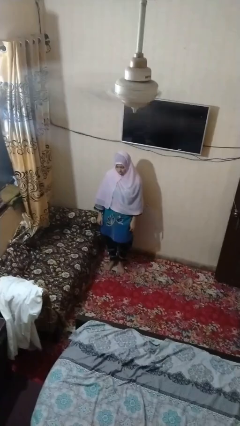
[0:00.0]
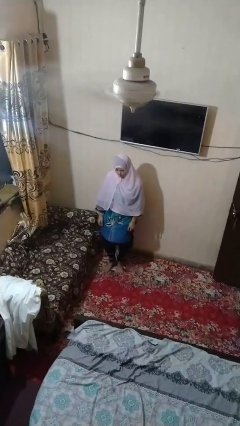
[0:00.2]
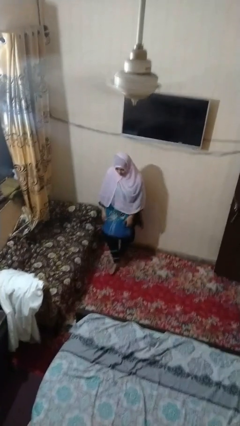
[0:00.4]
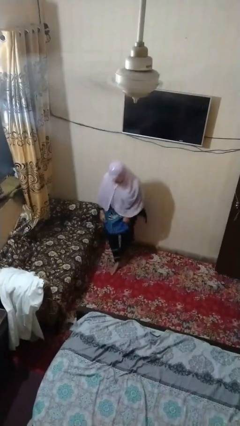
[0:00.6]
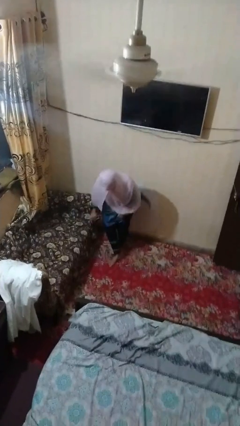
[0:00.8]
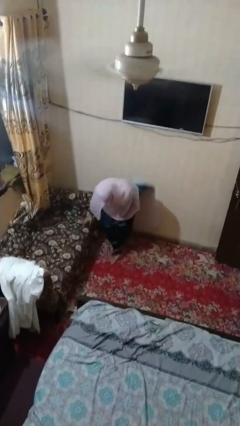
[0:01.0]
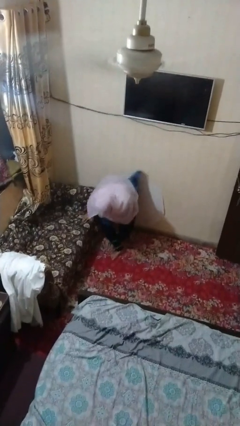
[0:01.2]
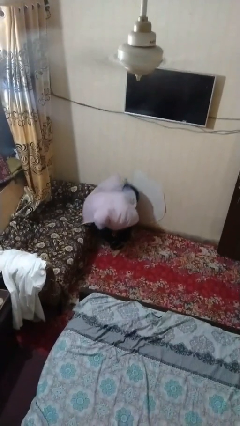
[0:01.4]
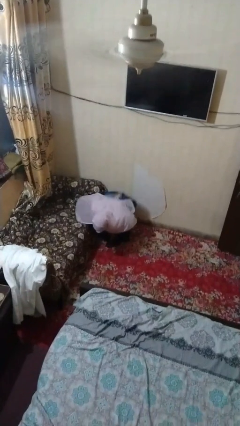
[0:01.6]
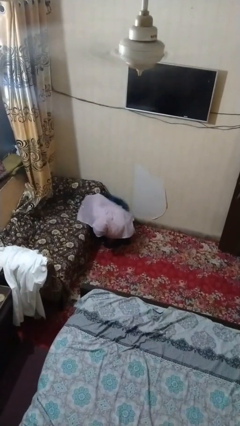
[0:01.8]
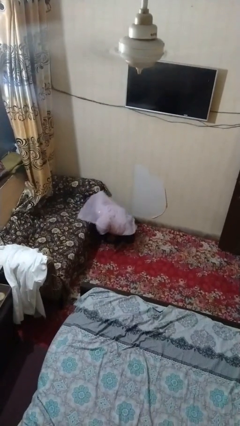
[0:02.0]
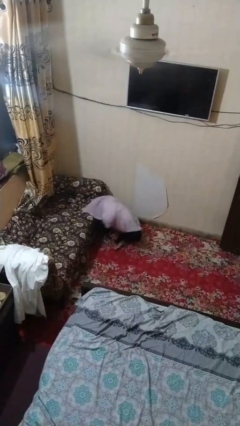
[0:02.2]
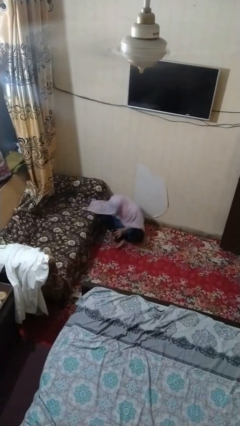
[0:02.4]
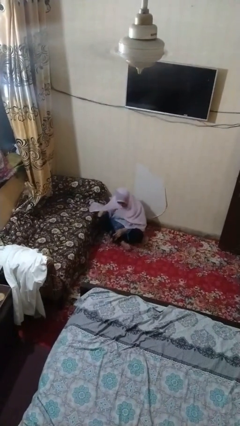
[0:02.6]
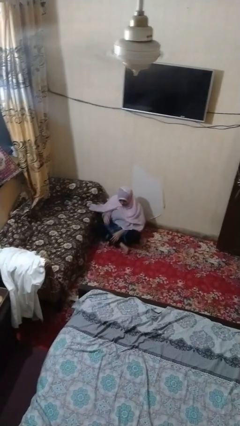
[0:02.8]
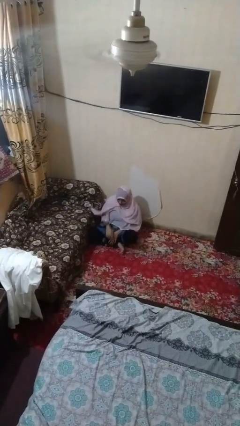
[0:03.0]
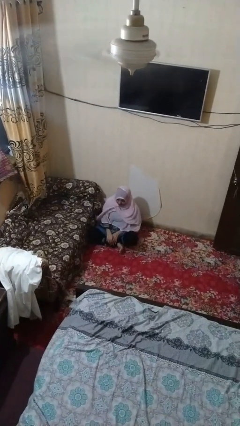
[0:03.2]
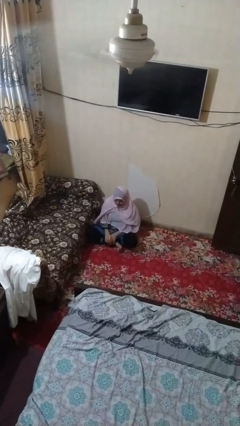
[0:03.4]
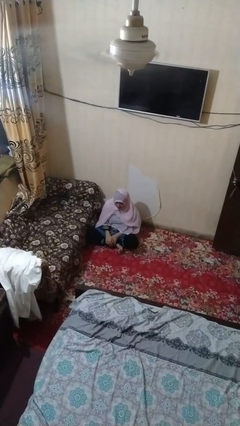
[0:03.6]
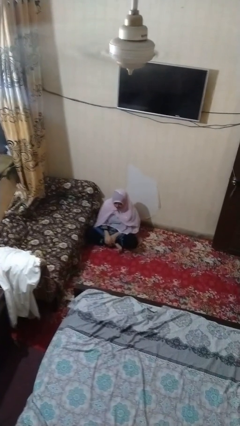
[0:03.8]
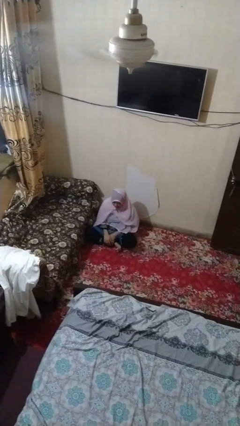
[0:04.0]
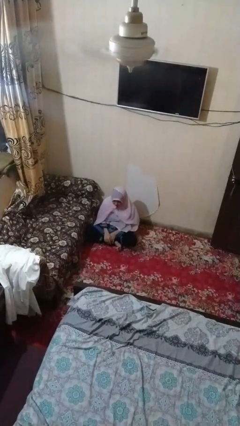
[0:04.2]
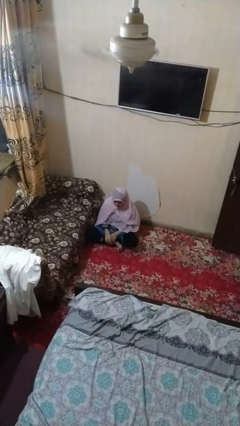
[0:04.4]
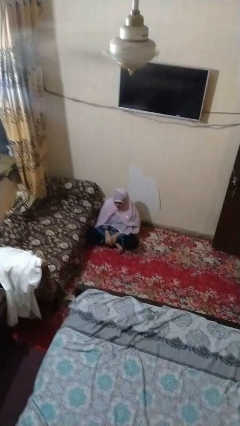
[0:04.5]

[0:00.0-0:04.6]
person sits crisscross

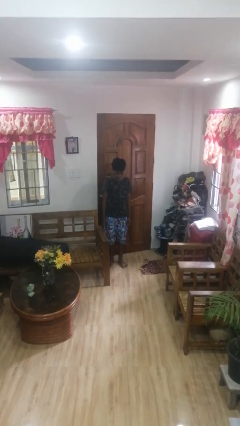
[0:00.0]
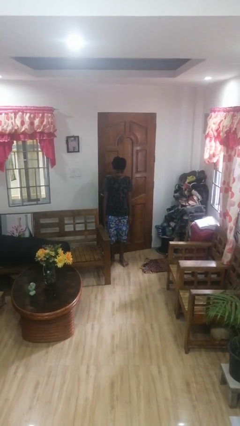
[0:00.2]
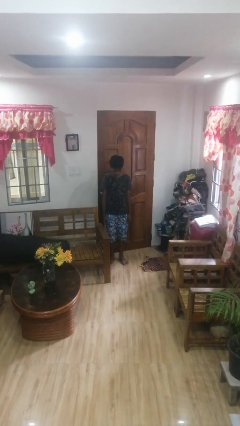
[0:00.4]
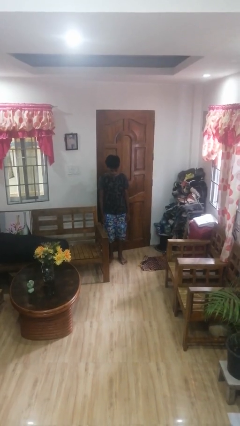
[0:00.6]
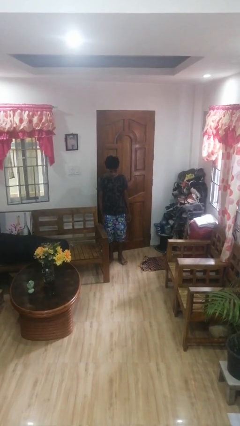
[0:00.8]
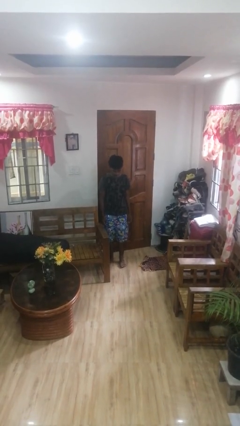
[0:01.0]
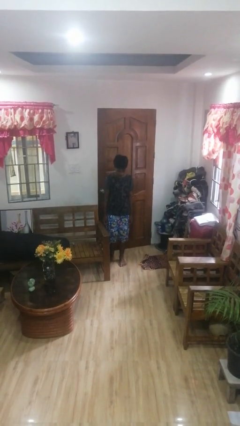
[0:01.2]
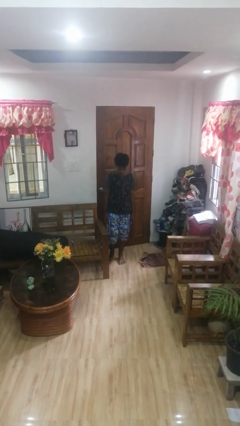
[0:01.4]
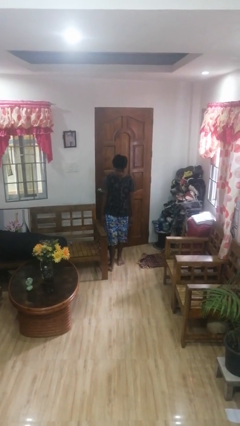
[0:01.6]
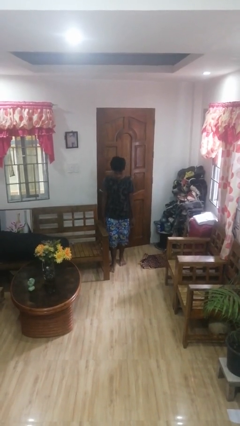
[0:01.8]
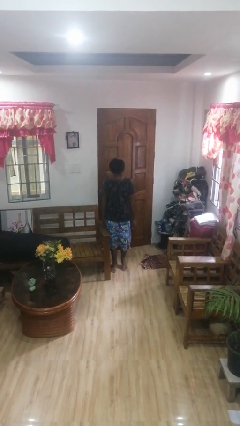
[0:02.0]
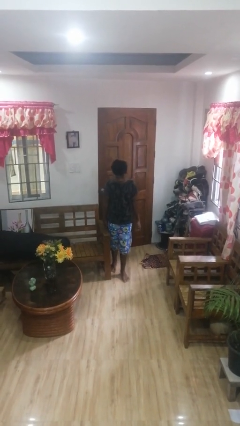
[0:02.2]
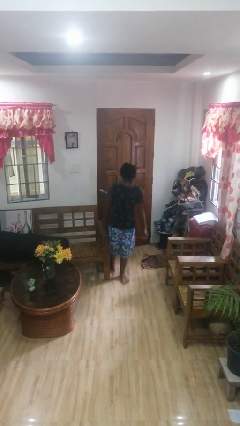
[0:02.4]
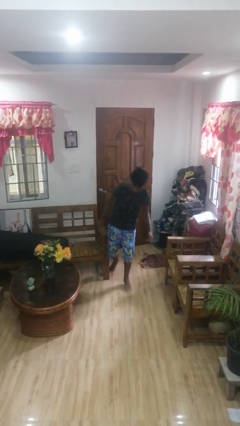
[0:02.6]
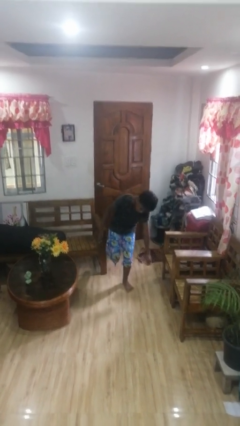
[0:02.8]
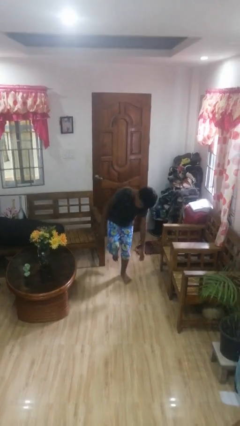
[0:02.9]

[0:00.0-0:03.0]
person trips on object on floor

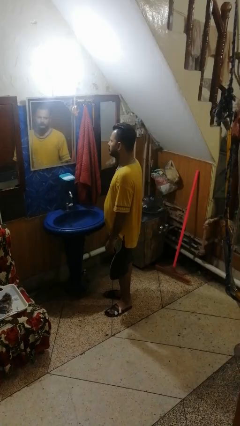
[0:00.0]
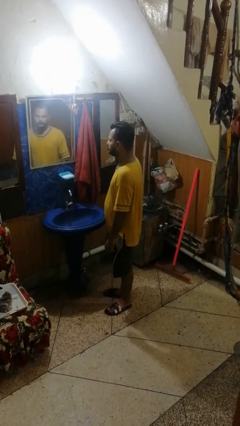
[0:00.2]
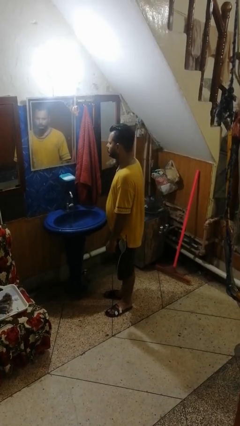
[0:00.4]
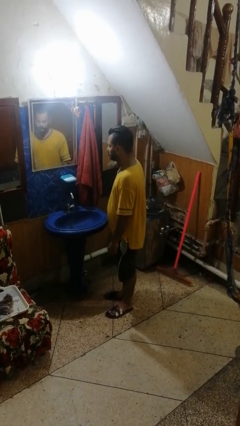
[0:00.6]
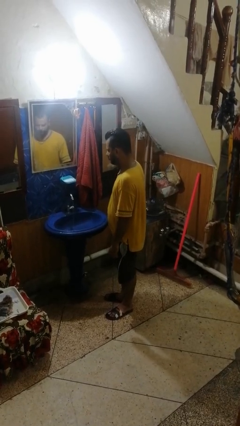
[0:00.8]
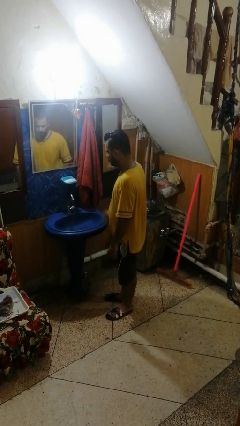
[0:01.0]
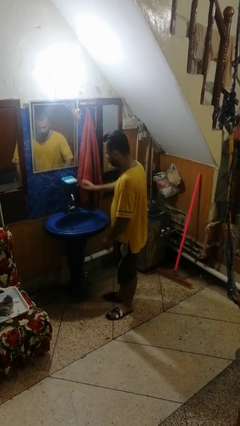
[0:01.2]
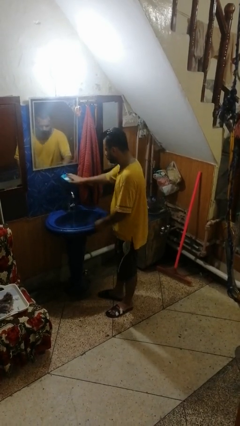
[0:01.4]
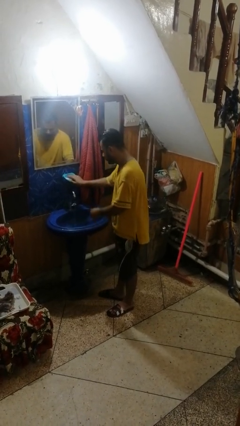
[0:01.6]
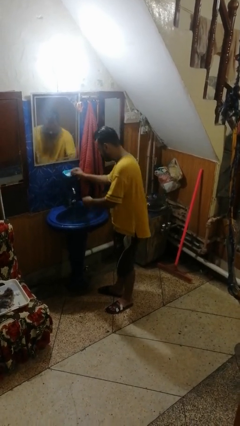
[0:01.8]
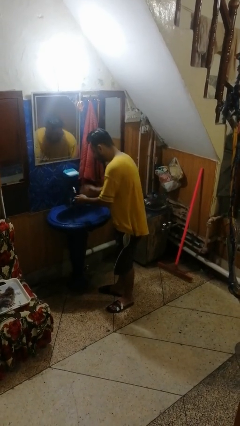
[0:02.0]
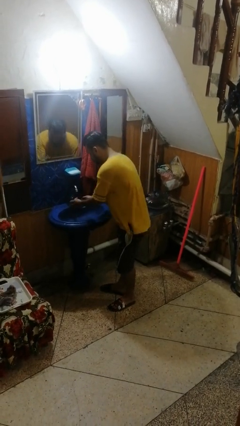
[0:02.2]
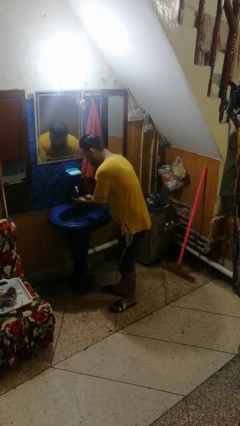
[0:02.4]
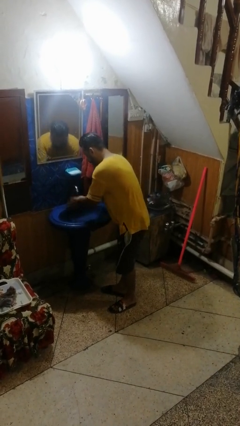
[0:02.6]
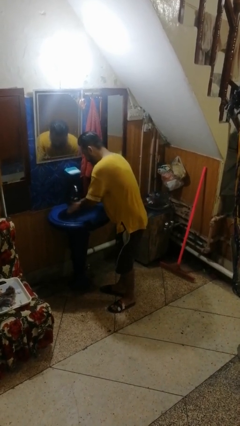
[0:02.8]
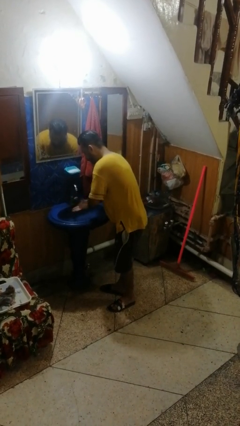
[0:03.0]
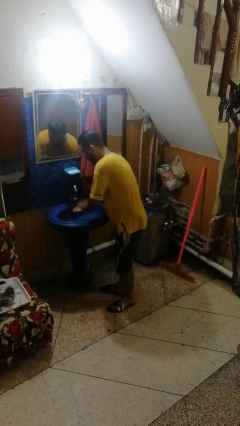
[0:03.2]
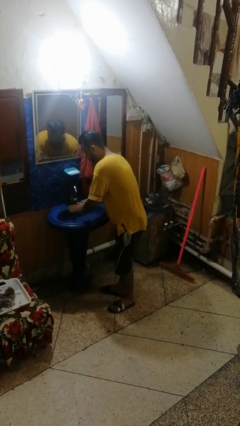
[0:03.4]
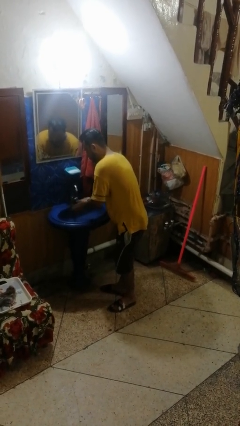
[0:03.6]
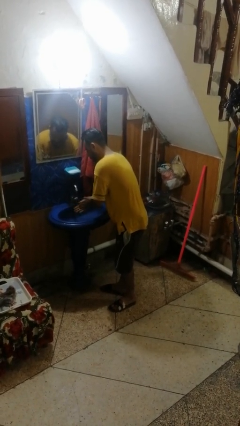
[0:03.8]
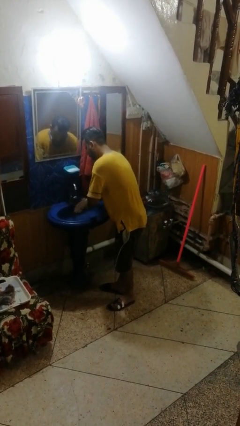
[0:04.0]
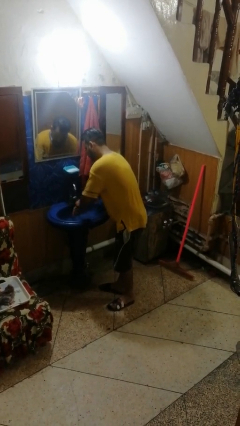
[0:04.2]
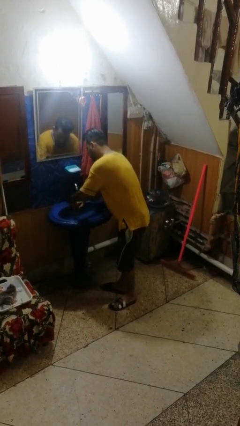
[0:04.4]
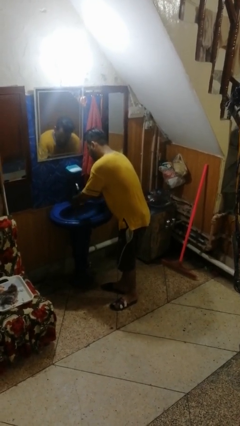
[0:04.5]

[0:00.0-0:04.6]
person washes hands

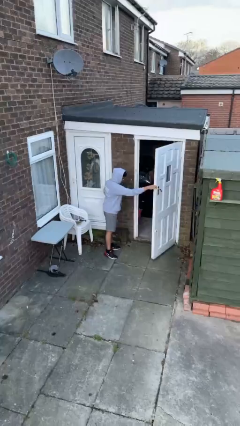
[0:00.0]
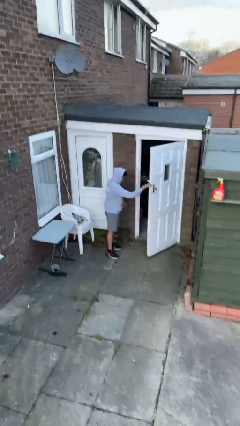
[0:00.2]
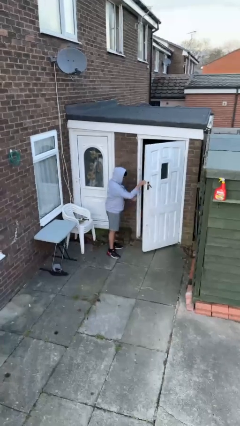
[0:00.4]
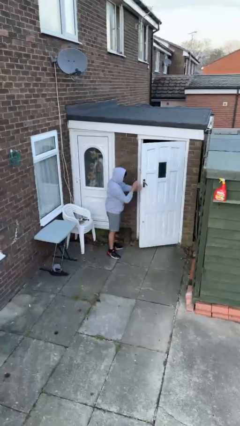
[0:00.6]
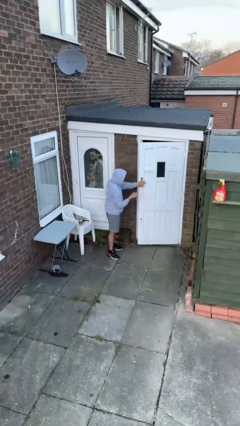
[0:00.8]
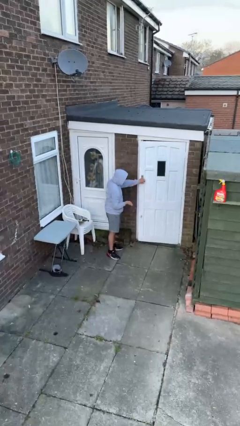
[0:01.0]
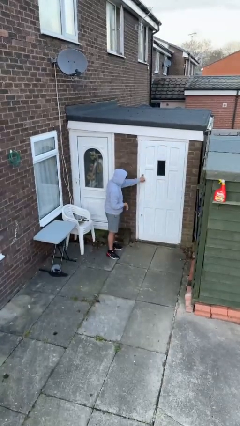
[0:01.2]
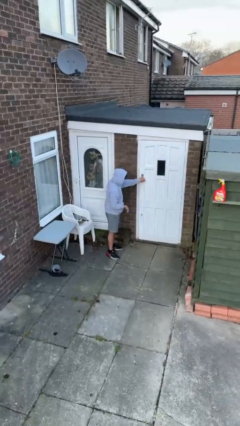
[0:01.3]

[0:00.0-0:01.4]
person closes facility door

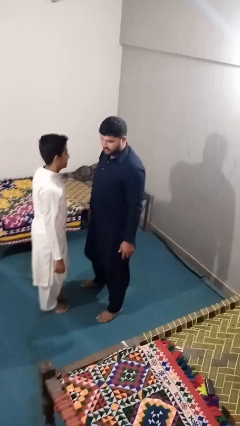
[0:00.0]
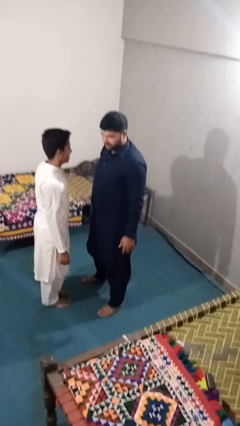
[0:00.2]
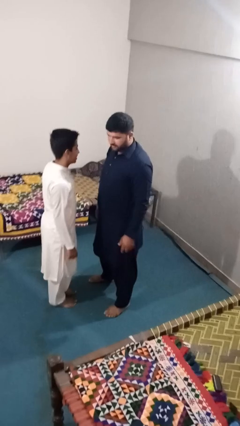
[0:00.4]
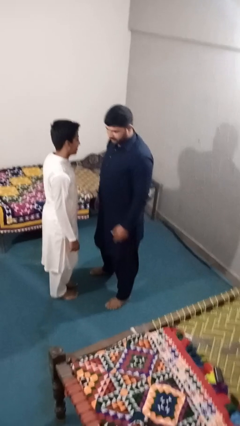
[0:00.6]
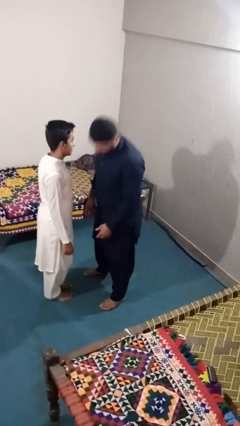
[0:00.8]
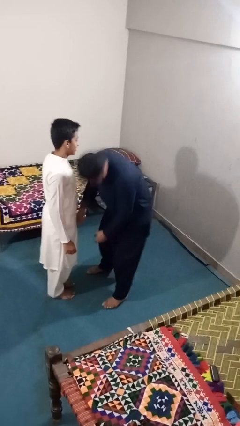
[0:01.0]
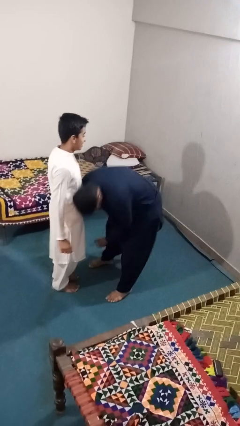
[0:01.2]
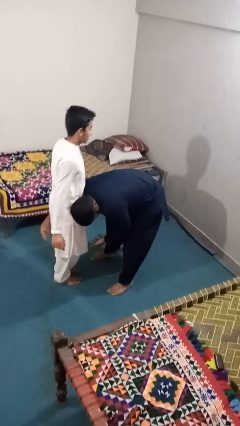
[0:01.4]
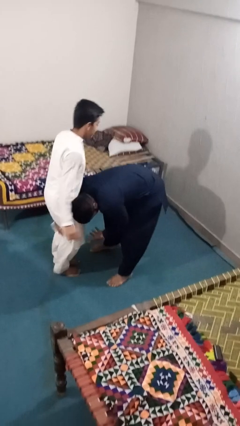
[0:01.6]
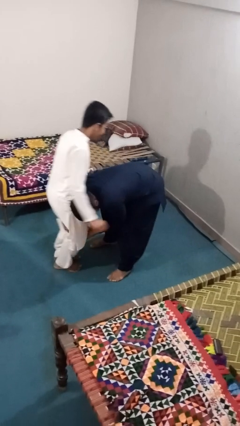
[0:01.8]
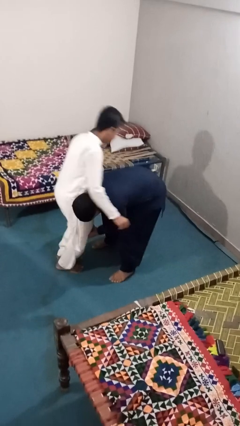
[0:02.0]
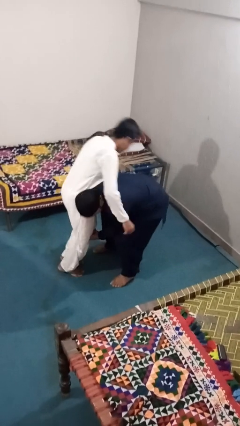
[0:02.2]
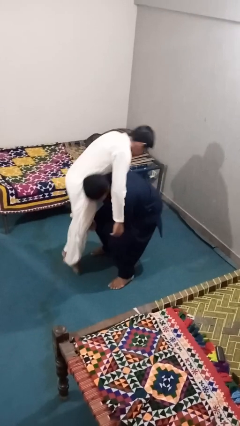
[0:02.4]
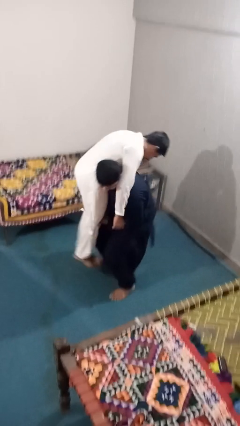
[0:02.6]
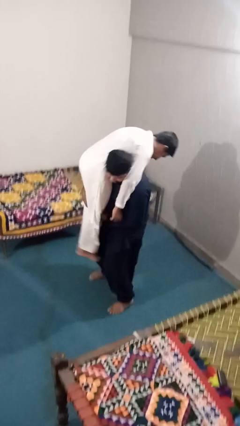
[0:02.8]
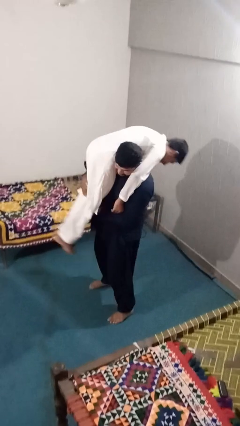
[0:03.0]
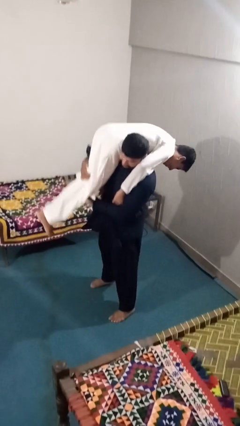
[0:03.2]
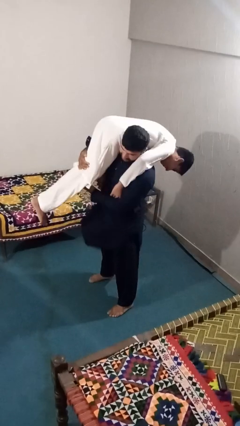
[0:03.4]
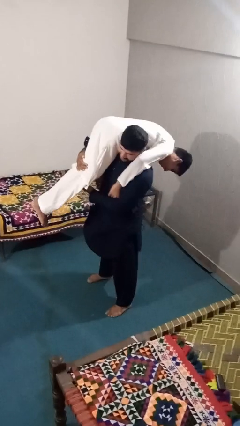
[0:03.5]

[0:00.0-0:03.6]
person carries person over shoulder

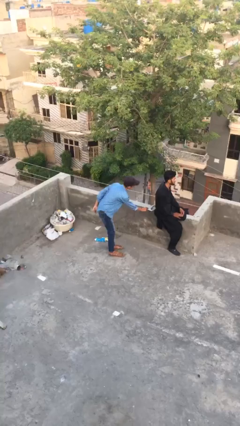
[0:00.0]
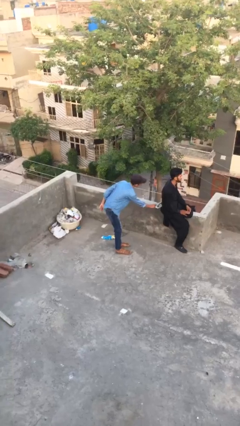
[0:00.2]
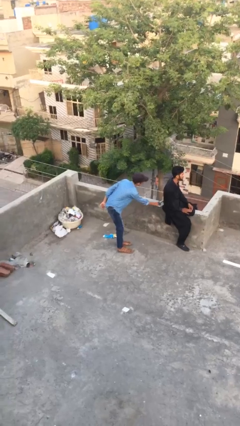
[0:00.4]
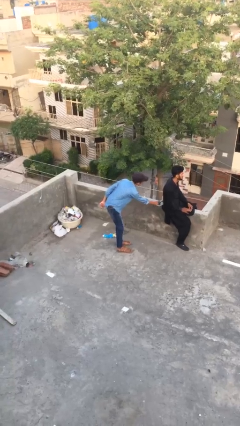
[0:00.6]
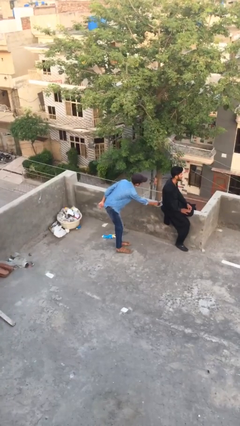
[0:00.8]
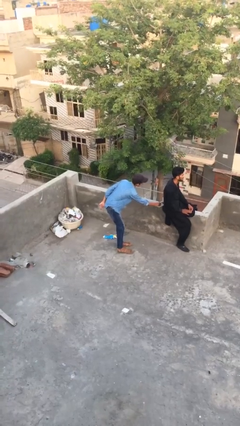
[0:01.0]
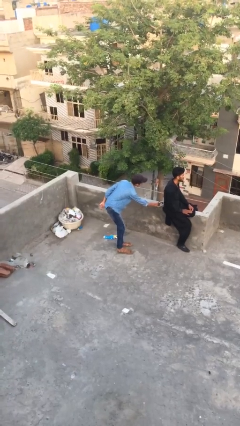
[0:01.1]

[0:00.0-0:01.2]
person steals object from person
